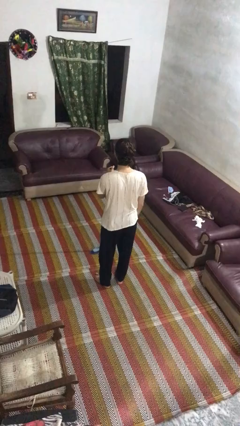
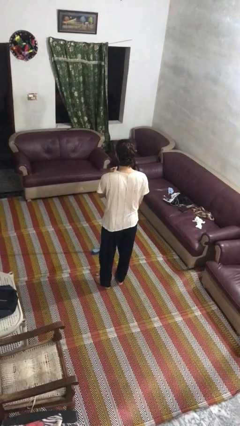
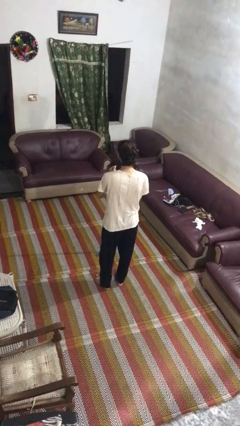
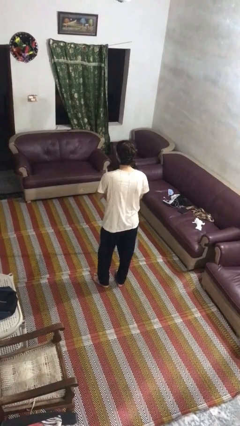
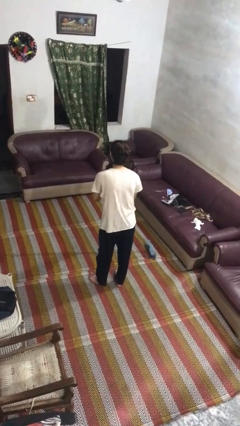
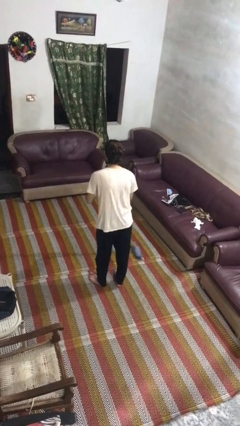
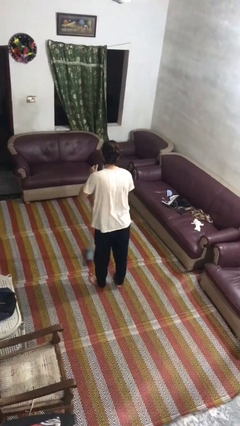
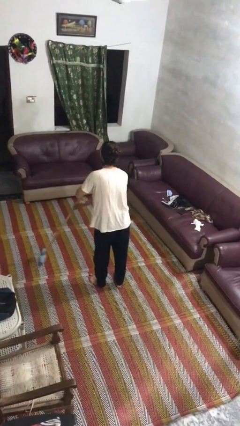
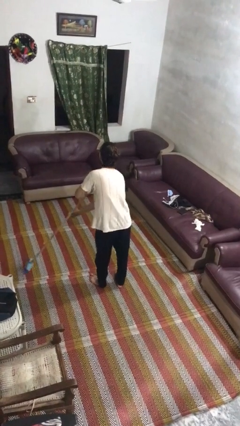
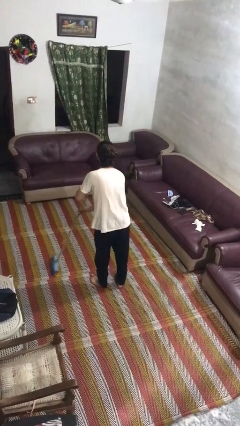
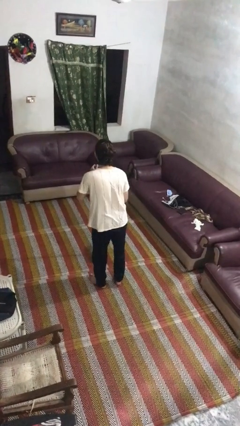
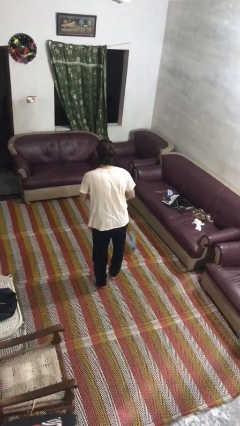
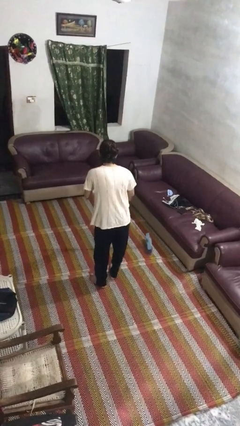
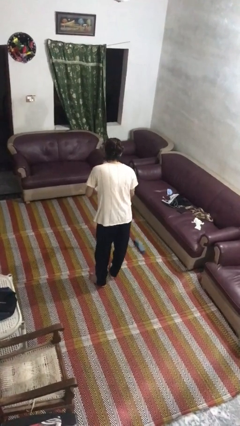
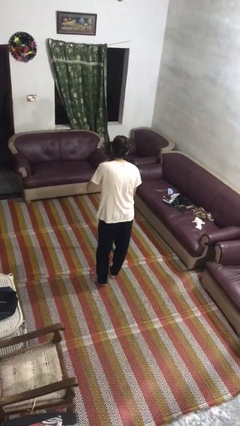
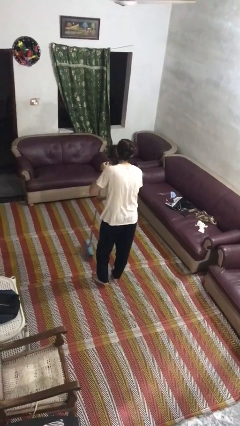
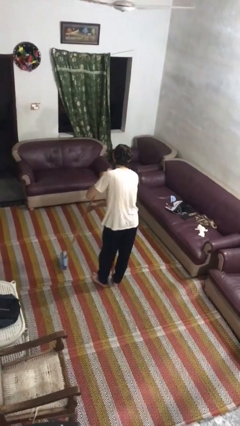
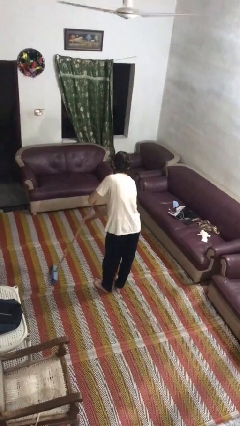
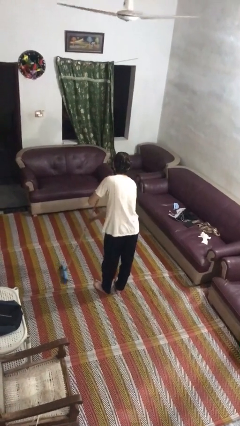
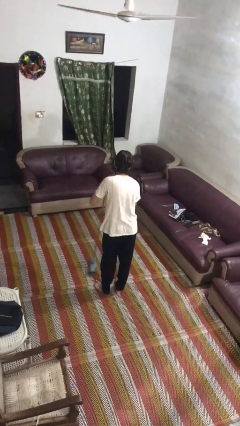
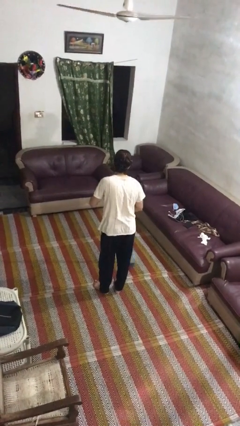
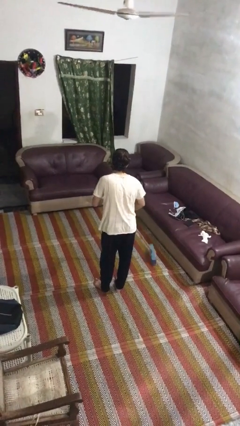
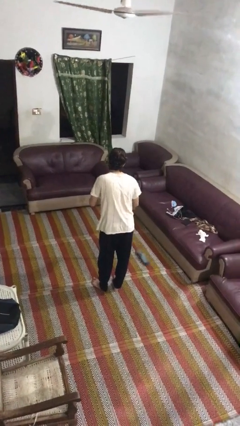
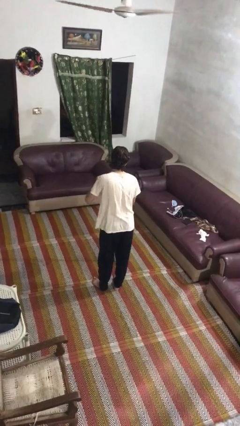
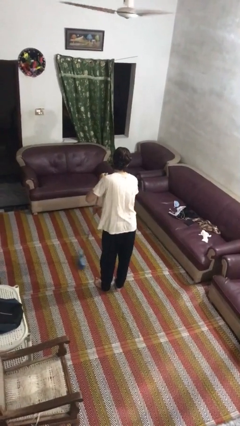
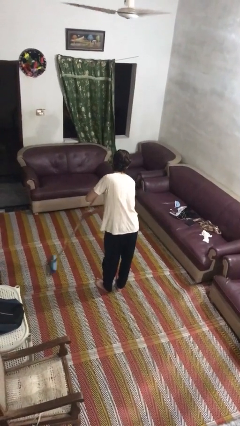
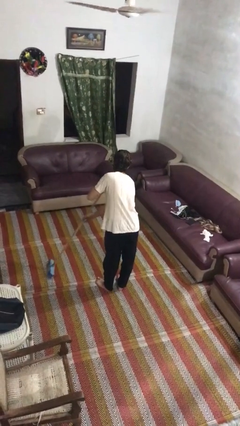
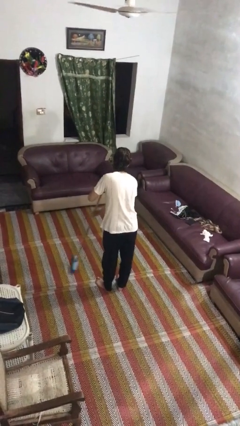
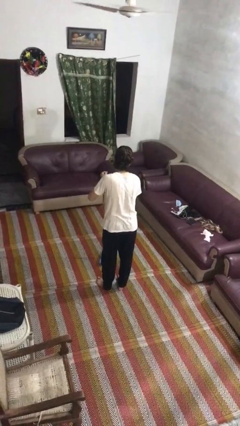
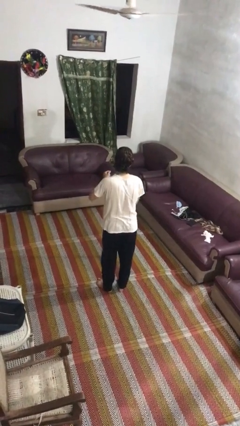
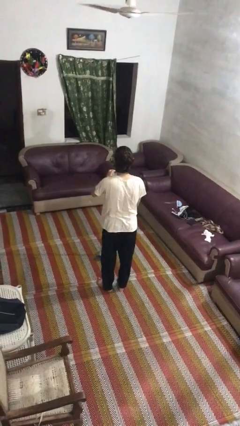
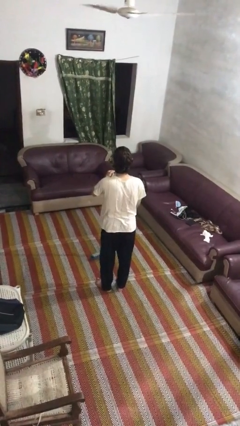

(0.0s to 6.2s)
person sweeps floor

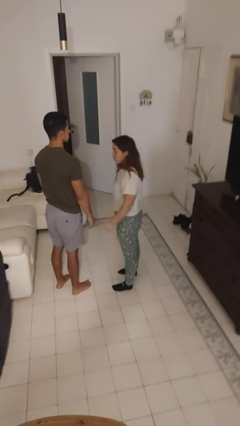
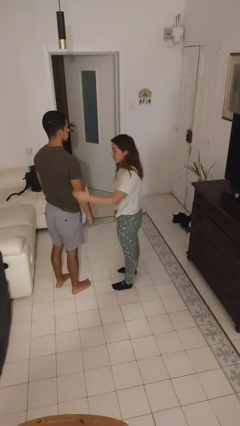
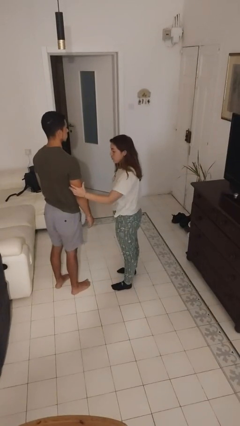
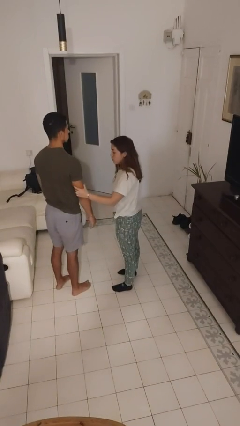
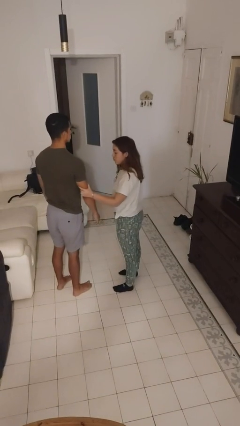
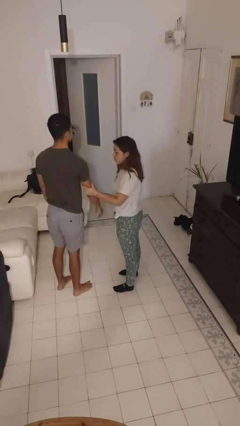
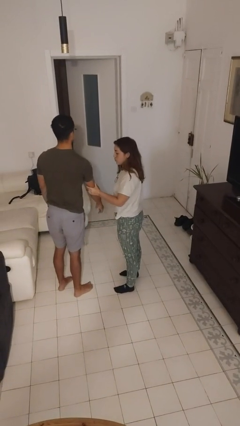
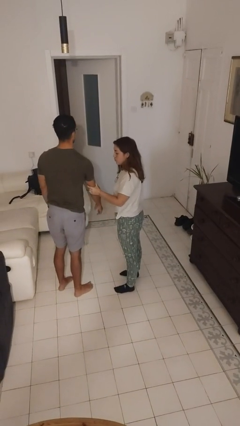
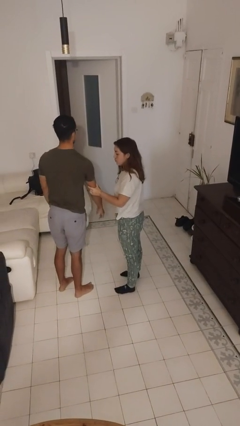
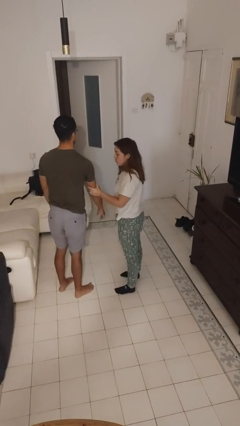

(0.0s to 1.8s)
person grabs person by bicep

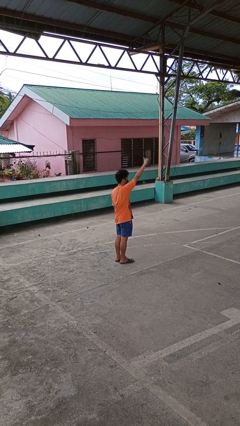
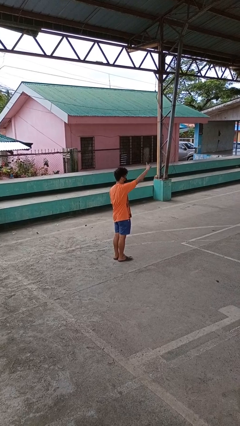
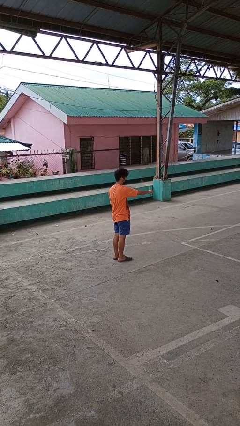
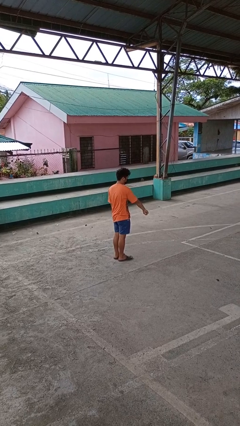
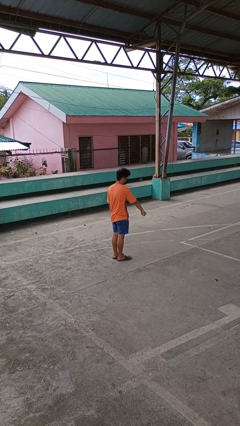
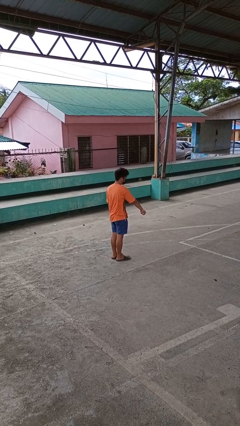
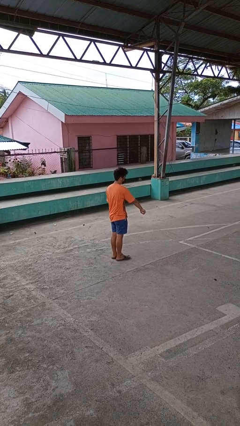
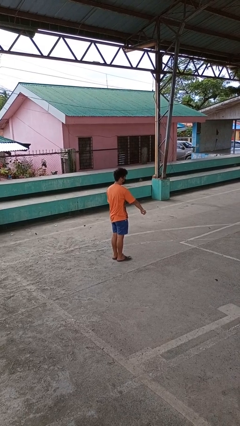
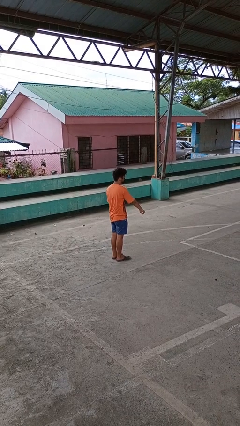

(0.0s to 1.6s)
person gestures swipe down

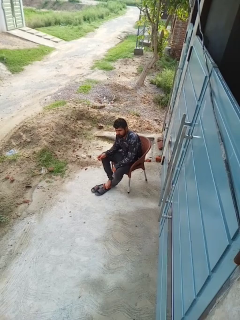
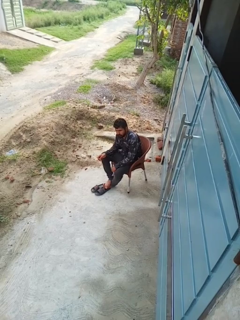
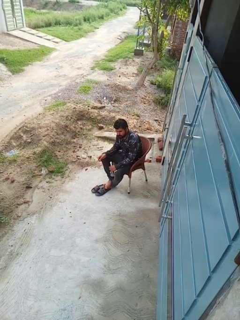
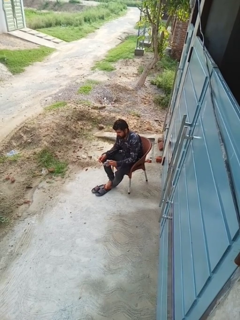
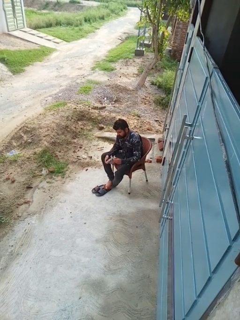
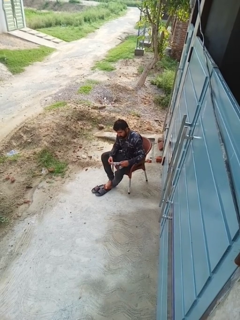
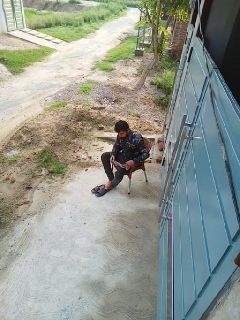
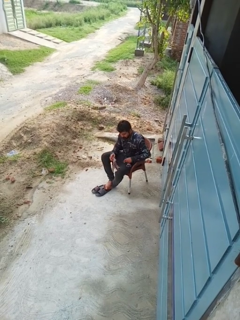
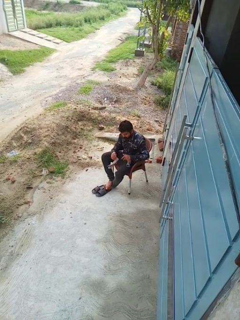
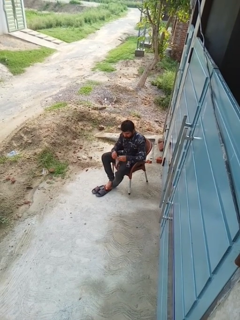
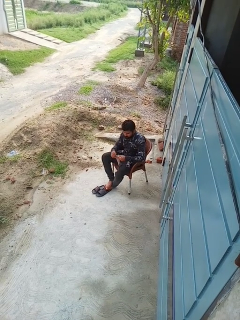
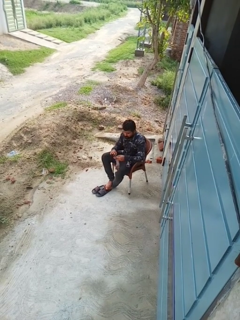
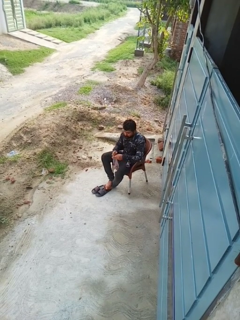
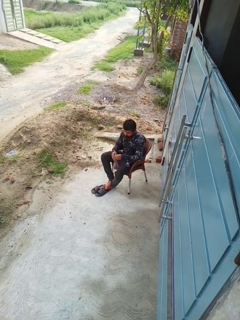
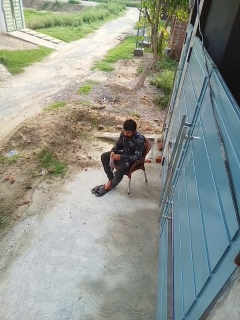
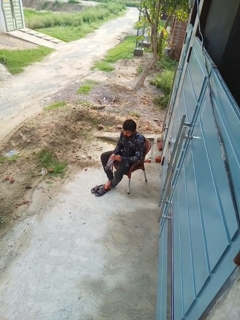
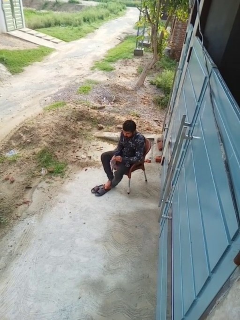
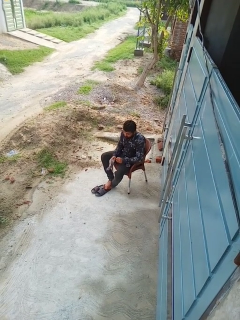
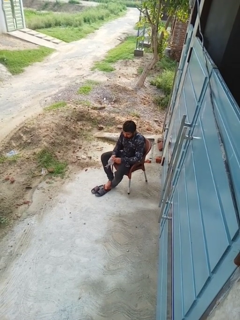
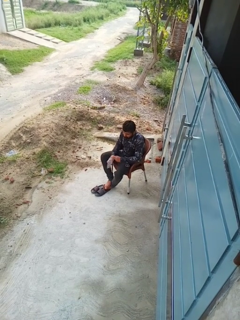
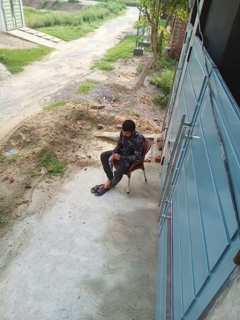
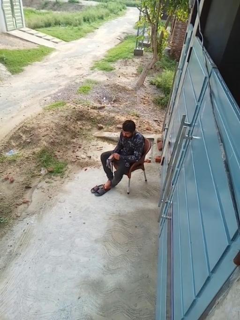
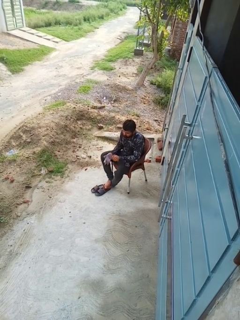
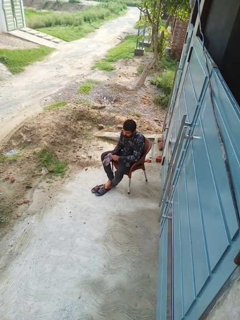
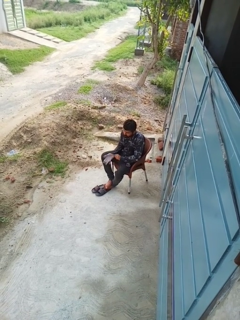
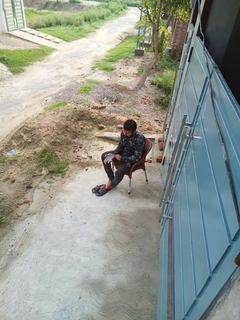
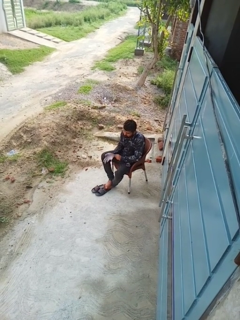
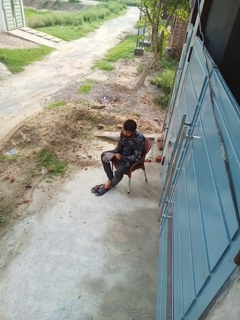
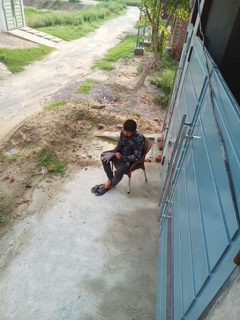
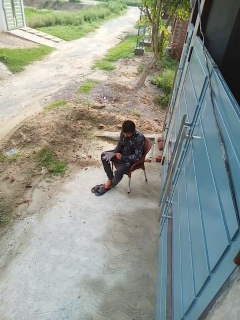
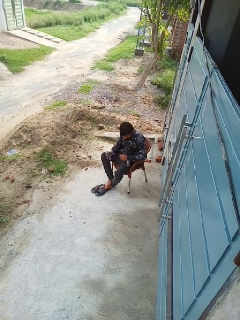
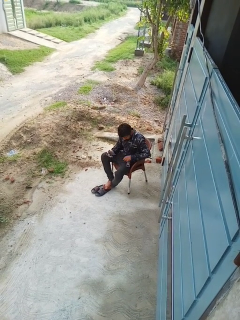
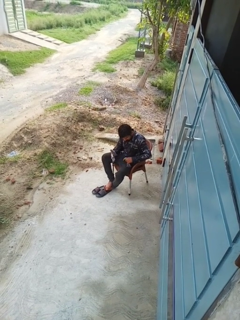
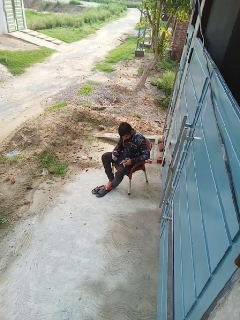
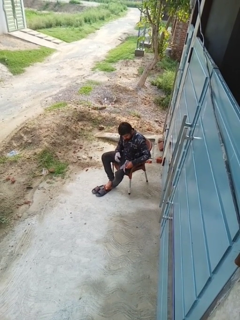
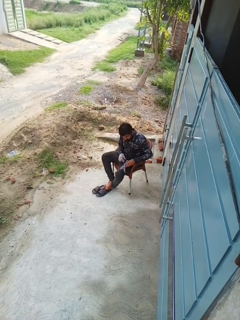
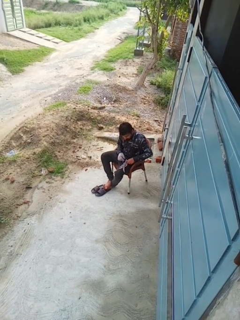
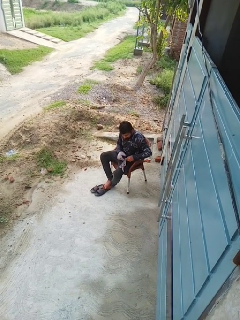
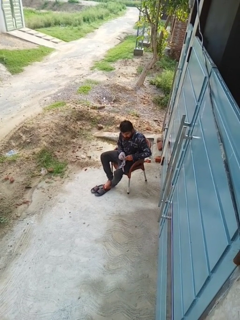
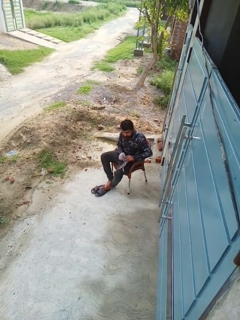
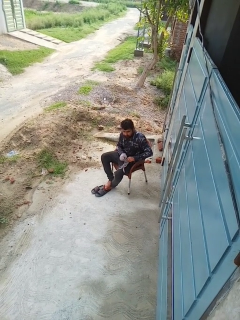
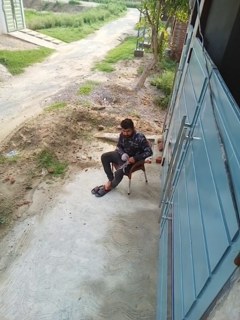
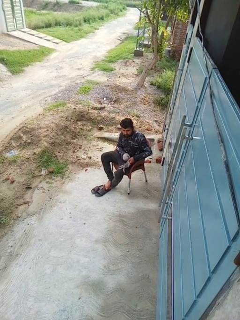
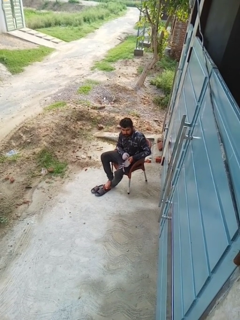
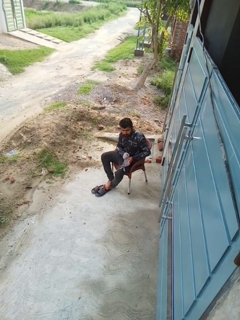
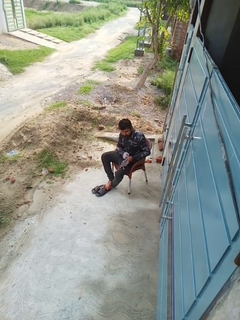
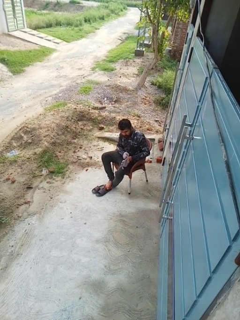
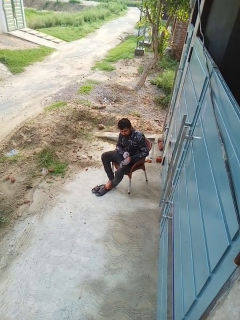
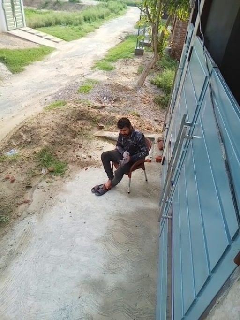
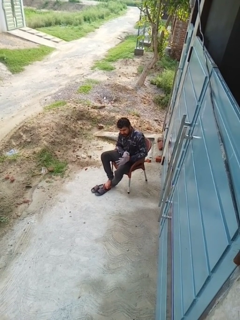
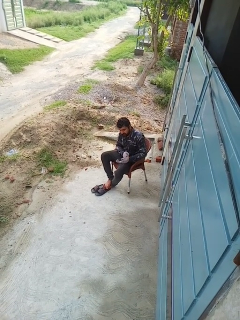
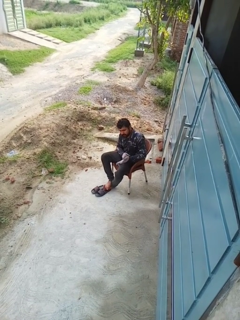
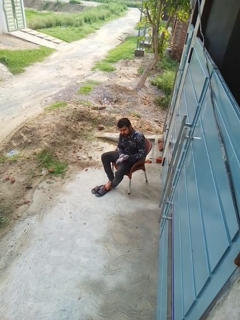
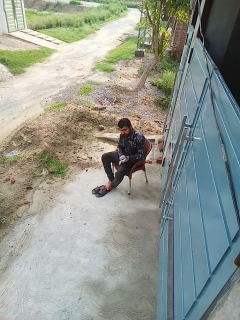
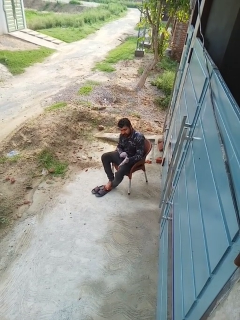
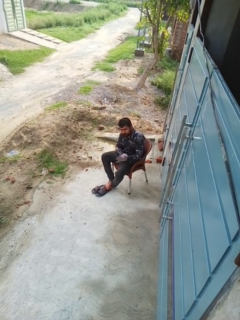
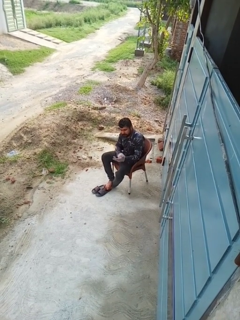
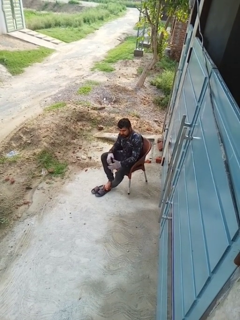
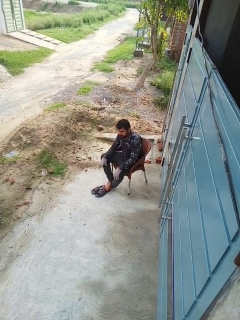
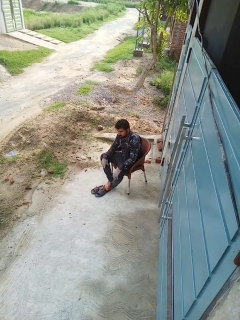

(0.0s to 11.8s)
person puts on gloves
